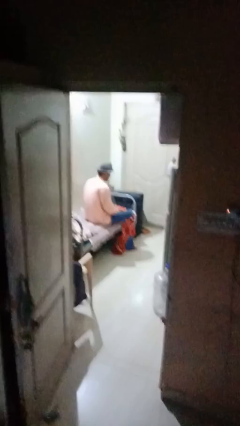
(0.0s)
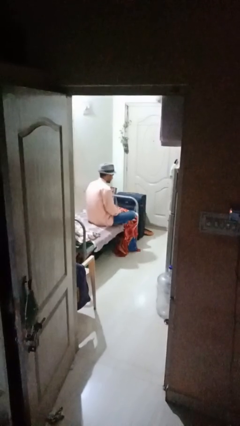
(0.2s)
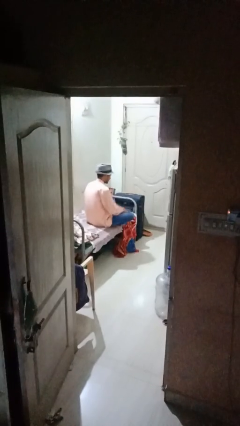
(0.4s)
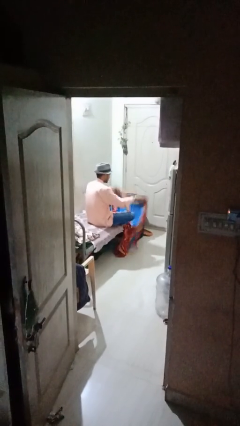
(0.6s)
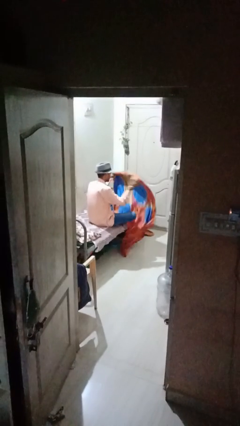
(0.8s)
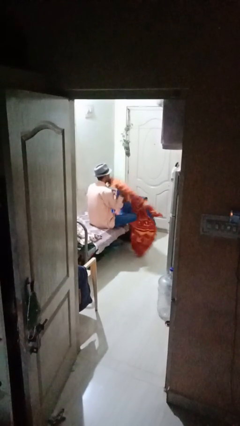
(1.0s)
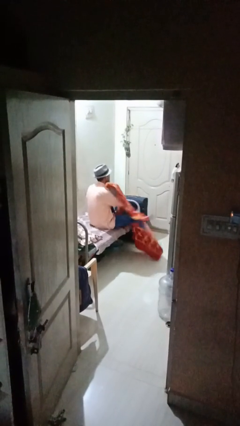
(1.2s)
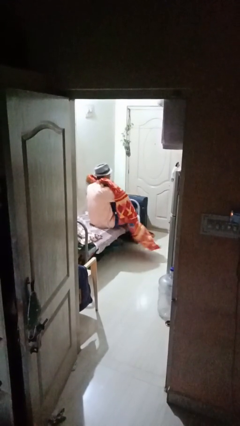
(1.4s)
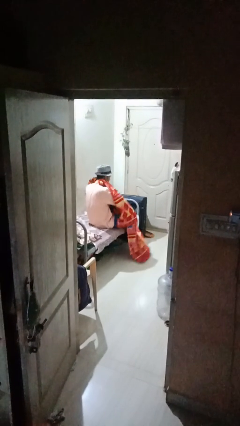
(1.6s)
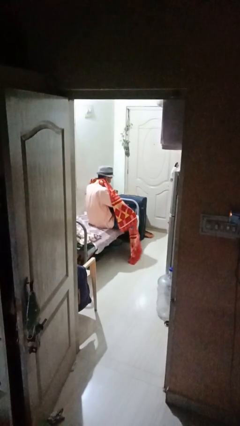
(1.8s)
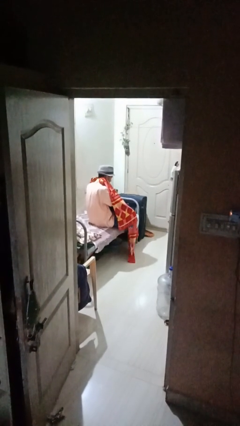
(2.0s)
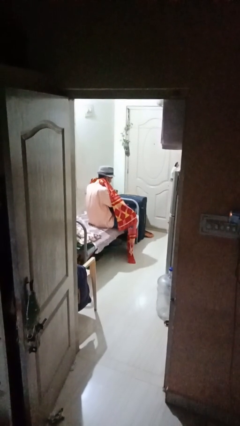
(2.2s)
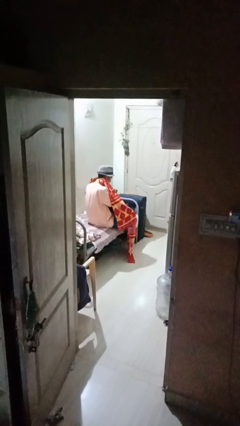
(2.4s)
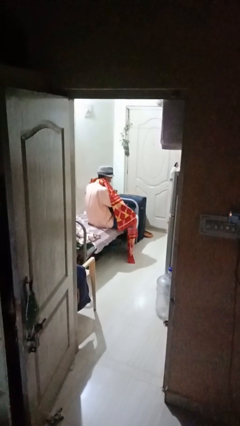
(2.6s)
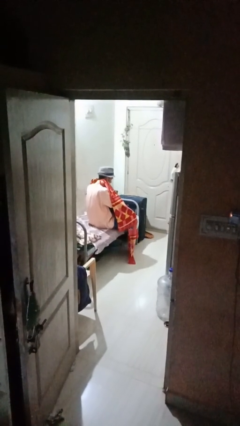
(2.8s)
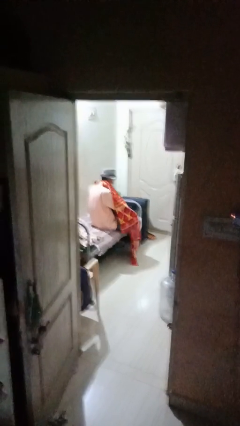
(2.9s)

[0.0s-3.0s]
person covers with blanket

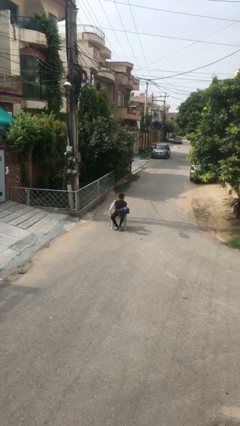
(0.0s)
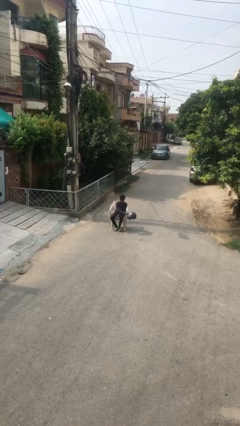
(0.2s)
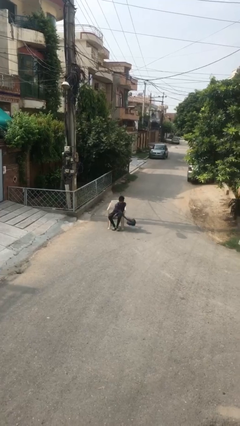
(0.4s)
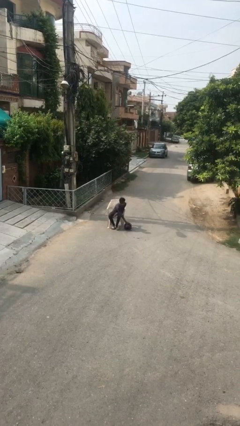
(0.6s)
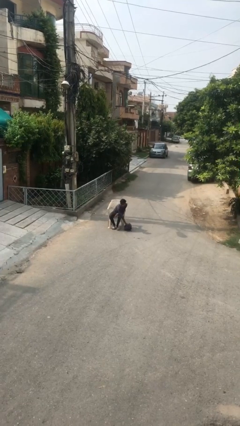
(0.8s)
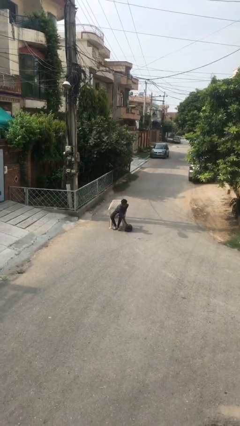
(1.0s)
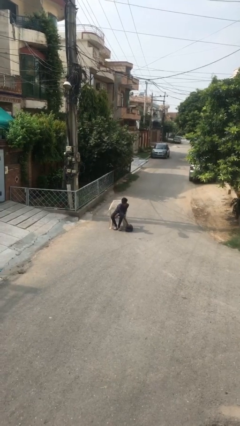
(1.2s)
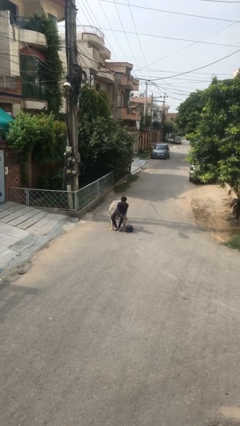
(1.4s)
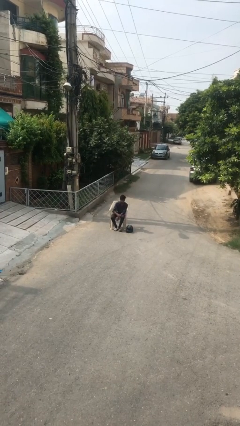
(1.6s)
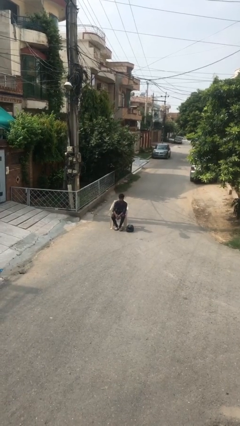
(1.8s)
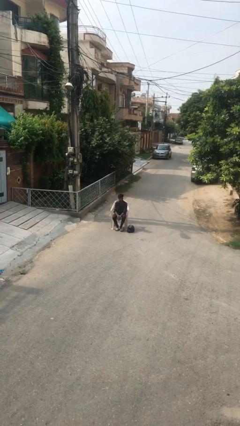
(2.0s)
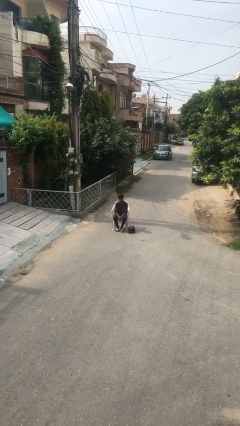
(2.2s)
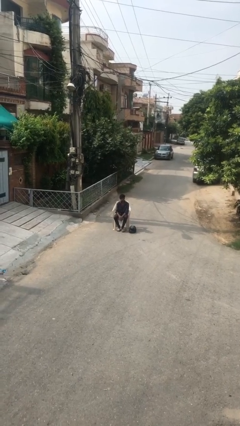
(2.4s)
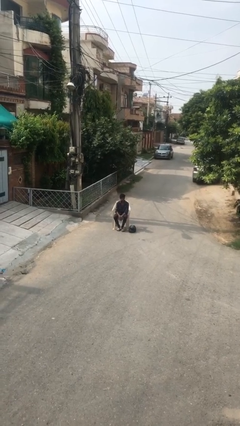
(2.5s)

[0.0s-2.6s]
person puts down object on floor

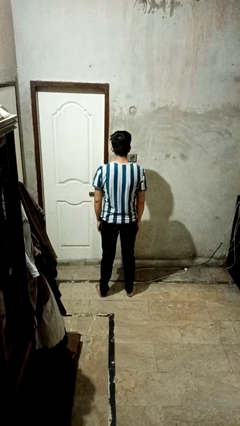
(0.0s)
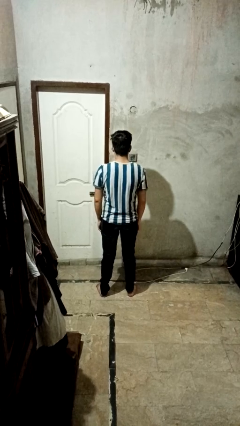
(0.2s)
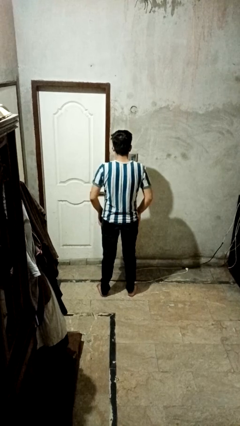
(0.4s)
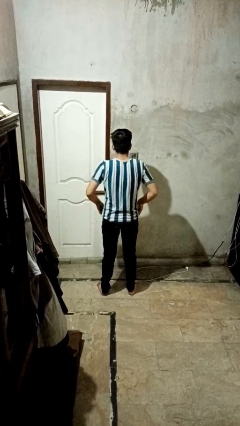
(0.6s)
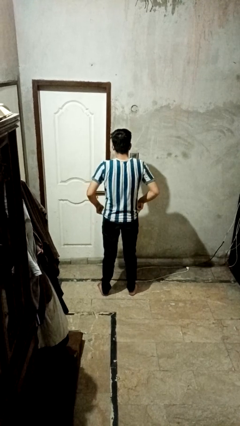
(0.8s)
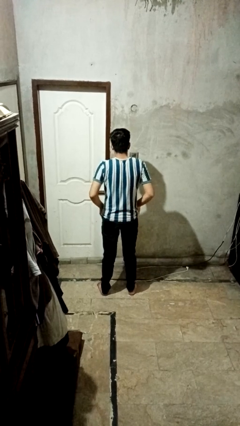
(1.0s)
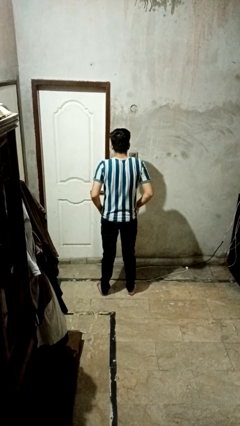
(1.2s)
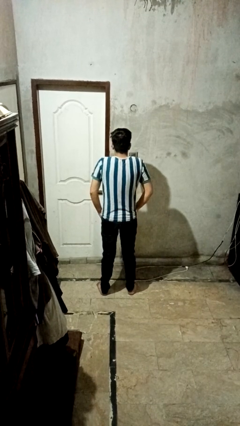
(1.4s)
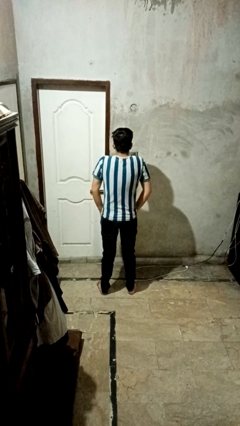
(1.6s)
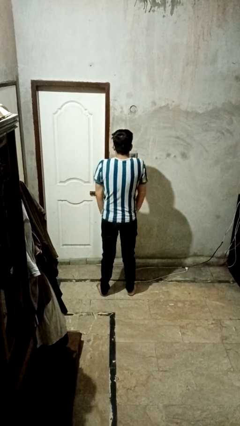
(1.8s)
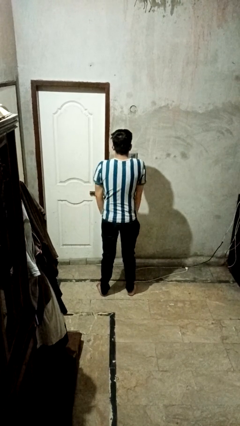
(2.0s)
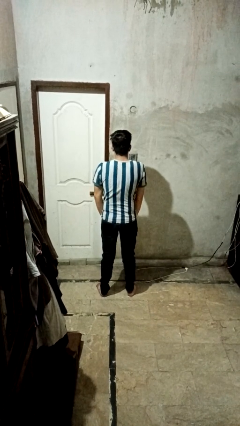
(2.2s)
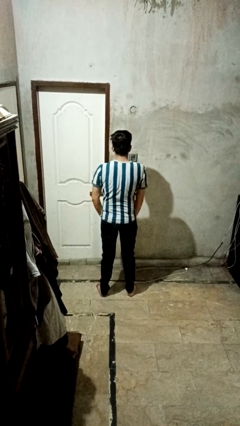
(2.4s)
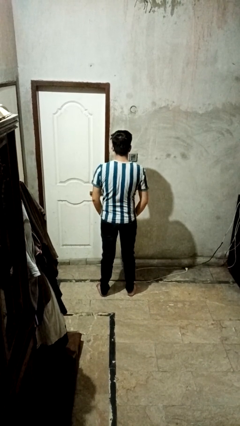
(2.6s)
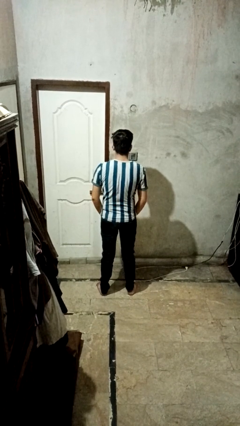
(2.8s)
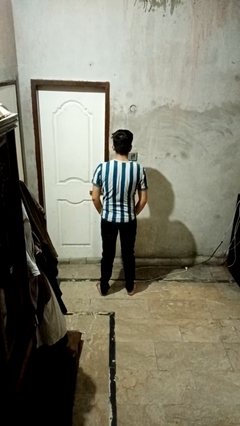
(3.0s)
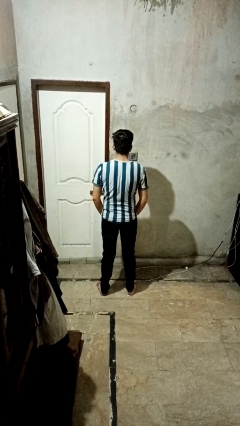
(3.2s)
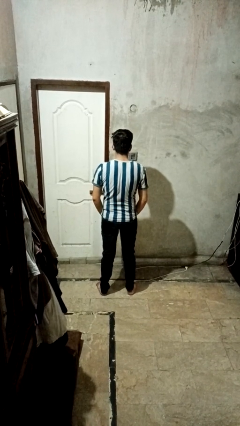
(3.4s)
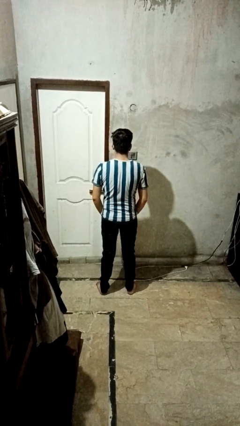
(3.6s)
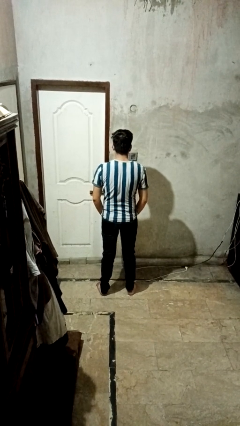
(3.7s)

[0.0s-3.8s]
person puts hands in back pockets

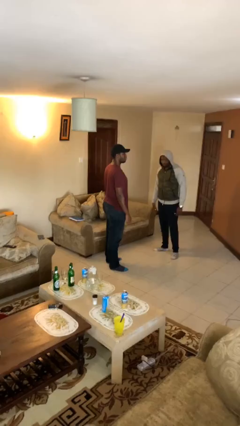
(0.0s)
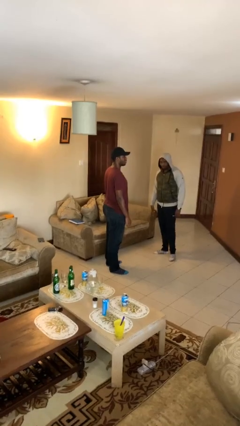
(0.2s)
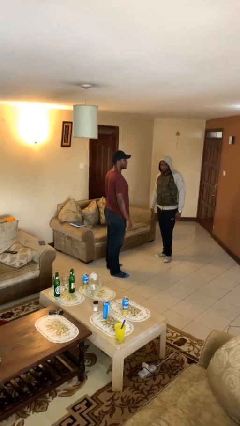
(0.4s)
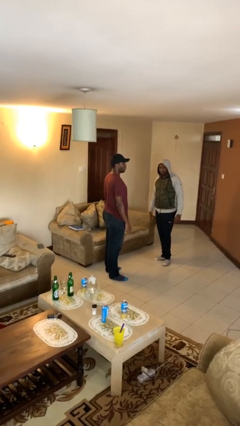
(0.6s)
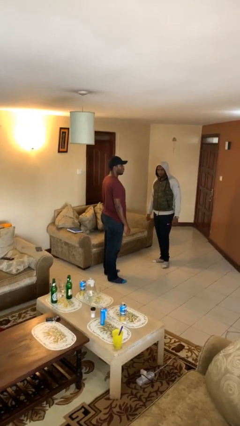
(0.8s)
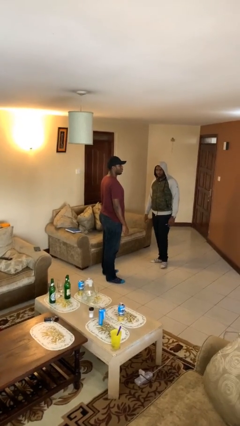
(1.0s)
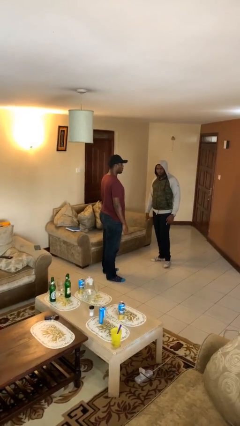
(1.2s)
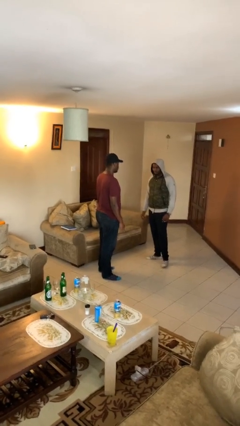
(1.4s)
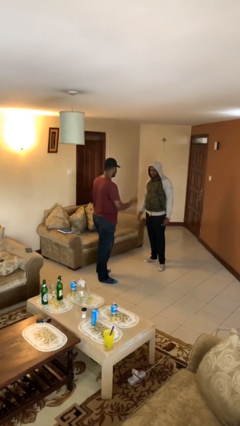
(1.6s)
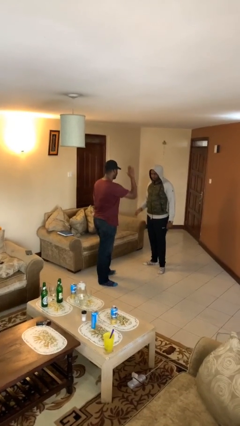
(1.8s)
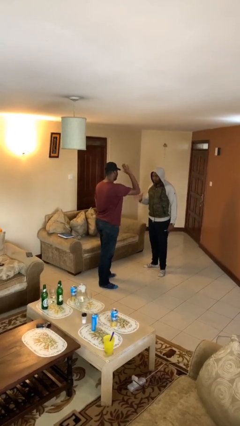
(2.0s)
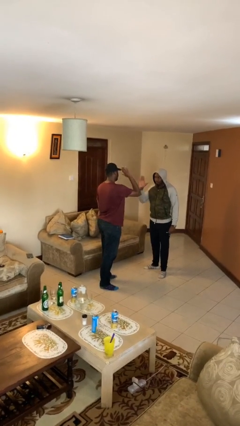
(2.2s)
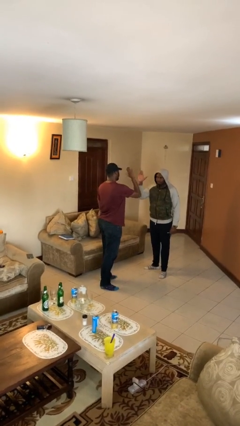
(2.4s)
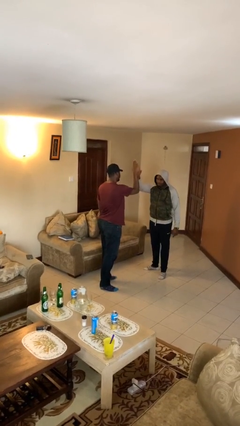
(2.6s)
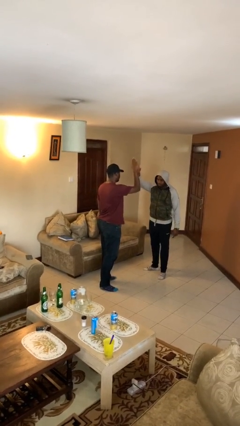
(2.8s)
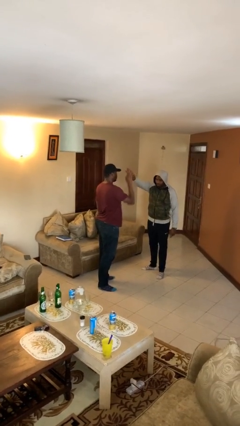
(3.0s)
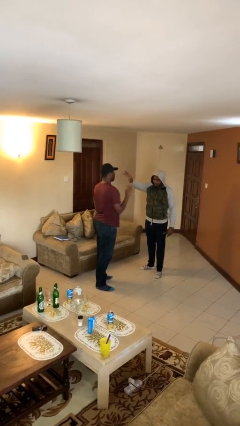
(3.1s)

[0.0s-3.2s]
person highfives hand

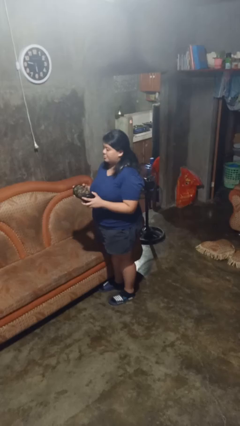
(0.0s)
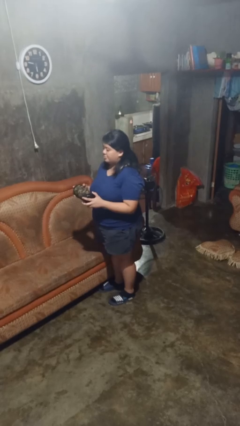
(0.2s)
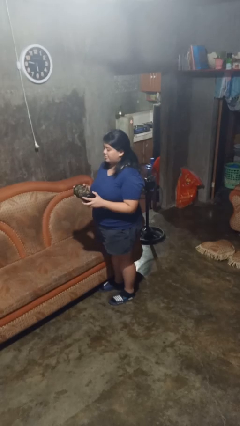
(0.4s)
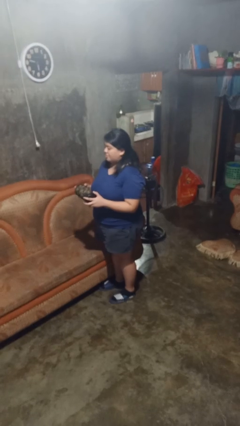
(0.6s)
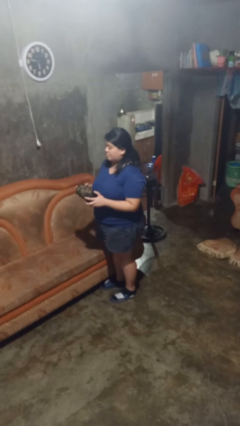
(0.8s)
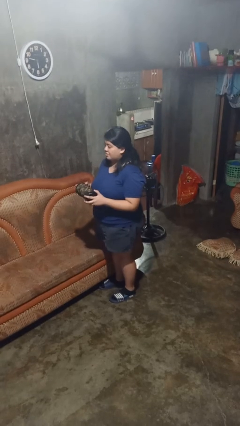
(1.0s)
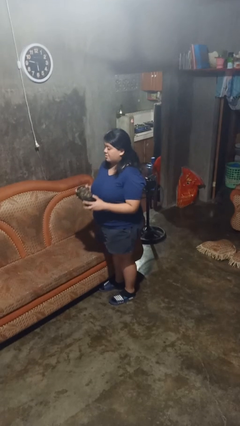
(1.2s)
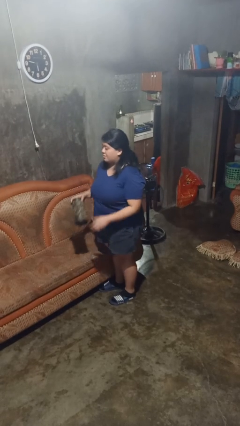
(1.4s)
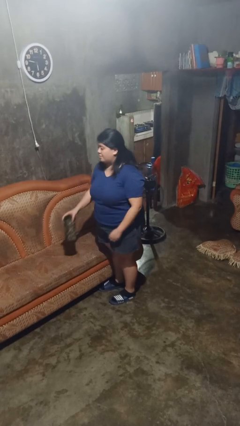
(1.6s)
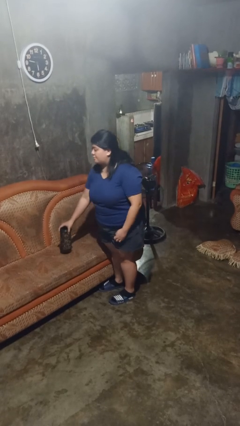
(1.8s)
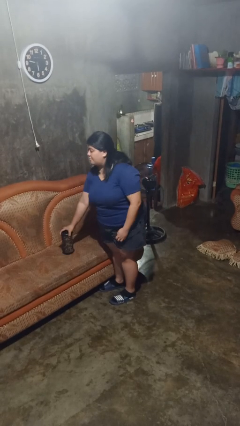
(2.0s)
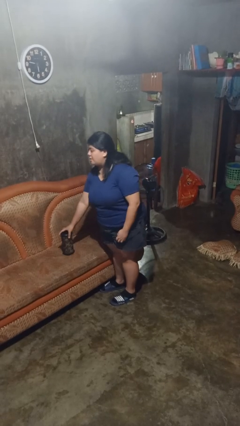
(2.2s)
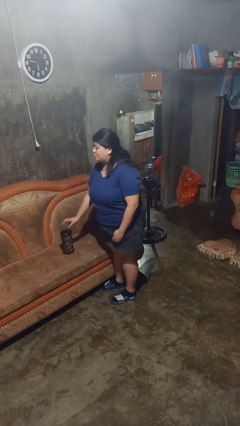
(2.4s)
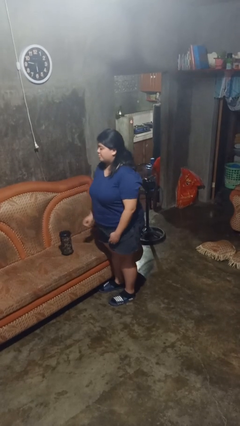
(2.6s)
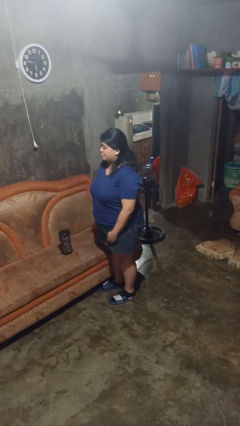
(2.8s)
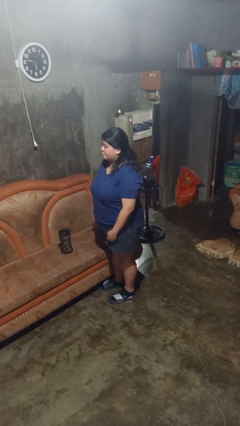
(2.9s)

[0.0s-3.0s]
person puts down object on couch

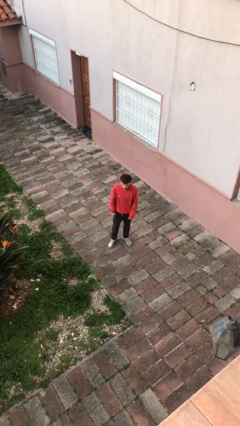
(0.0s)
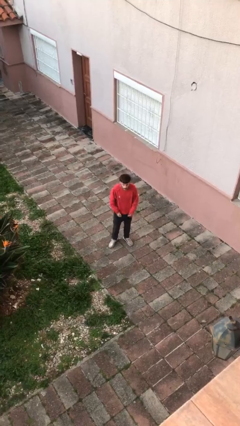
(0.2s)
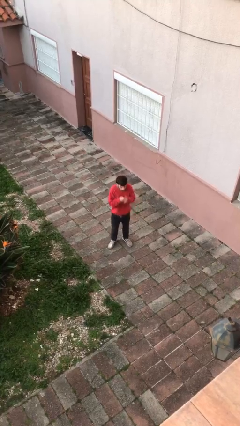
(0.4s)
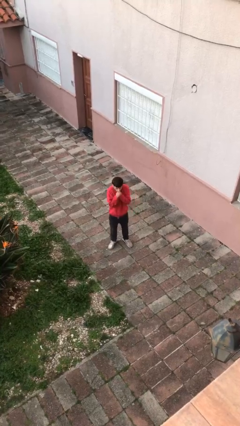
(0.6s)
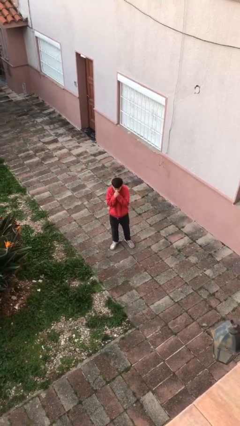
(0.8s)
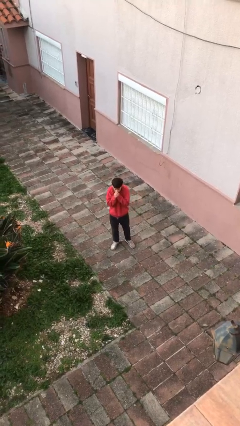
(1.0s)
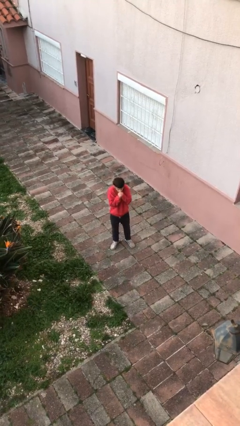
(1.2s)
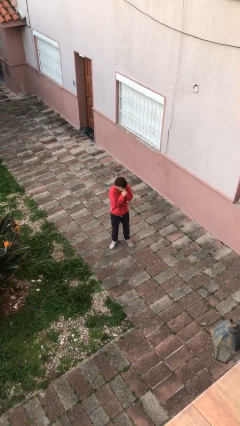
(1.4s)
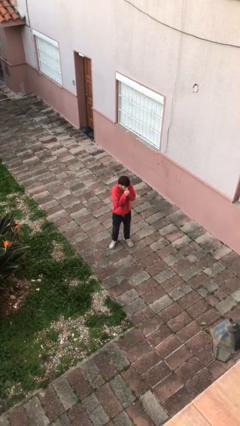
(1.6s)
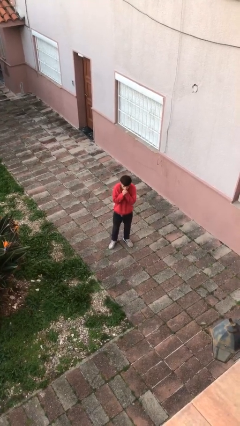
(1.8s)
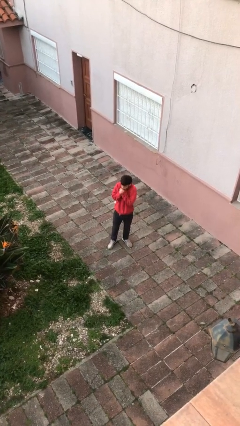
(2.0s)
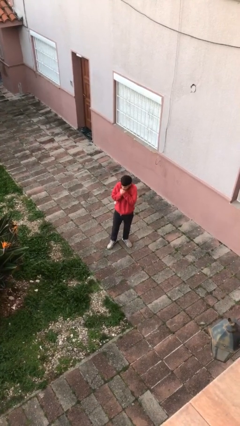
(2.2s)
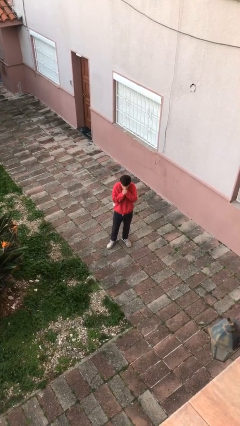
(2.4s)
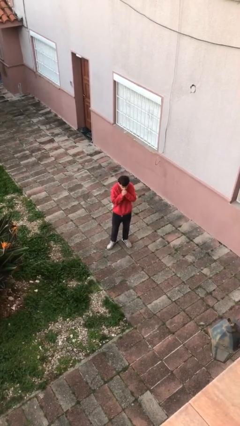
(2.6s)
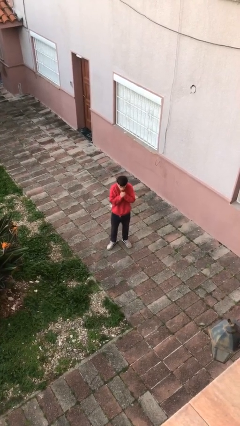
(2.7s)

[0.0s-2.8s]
person blows into hands
